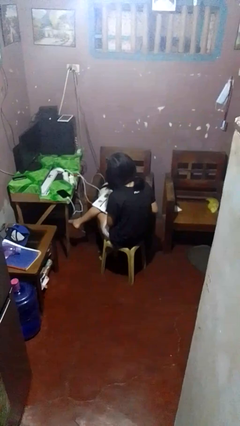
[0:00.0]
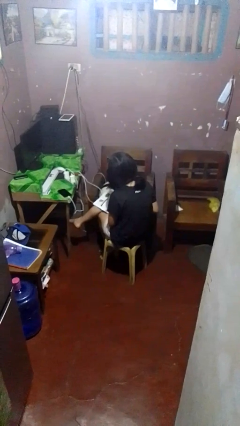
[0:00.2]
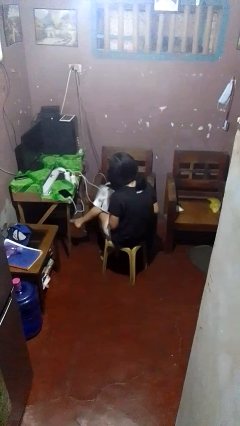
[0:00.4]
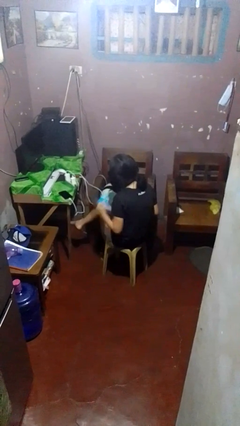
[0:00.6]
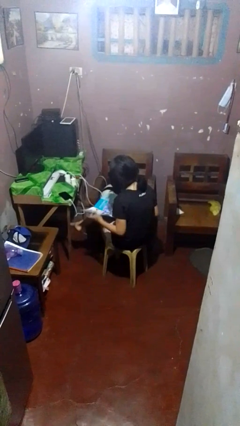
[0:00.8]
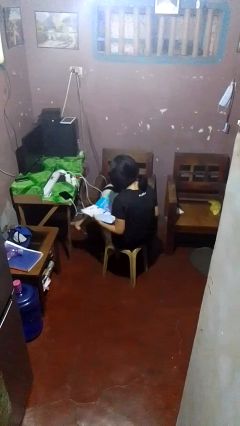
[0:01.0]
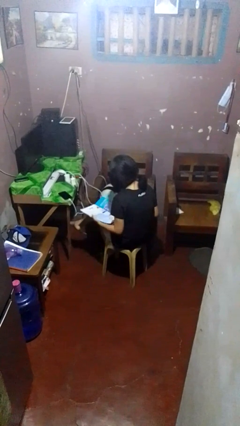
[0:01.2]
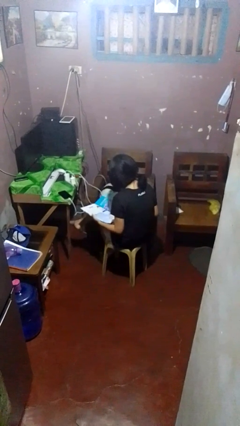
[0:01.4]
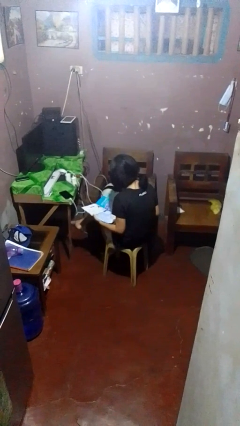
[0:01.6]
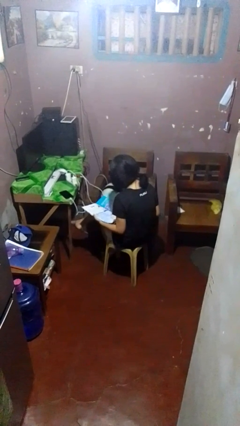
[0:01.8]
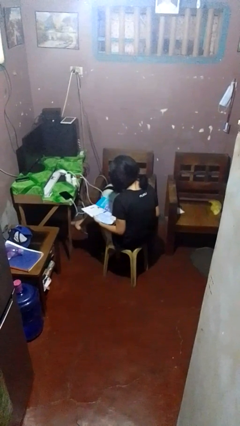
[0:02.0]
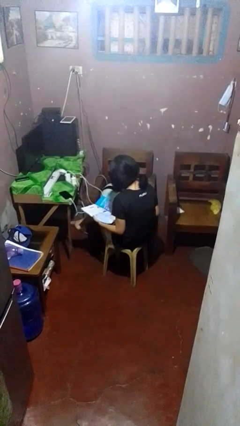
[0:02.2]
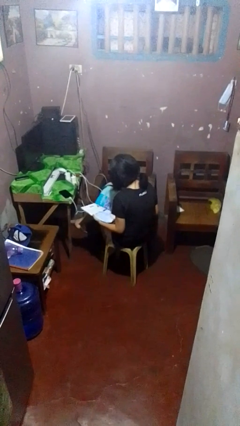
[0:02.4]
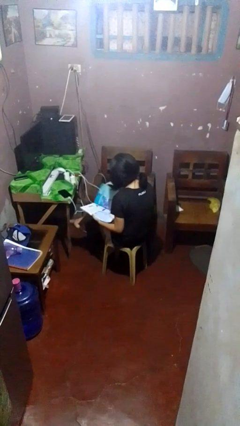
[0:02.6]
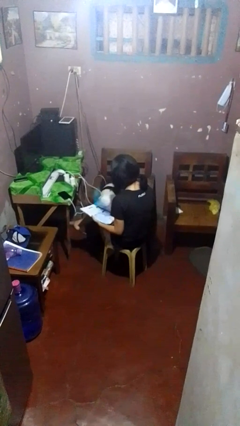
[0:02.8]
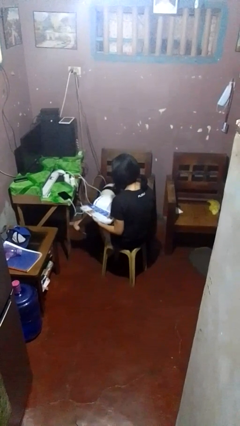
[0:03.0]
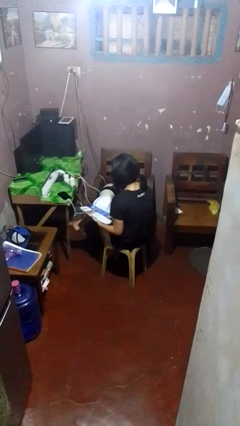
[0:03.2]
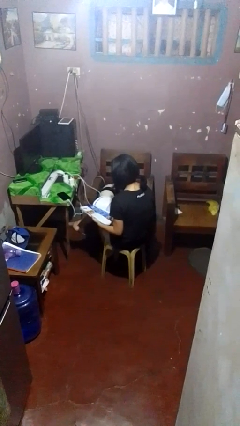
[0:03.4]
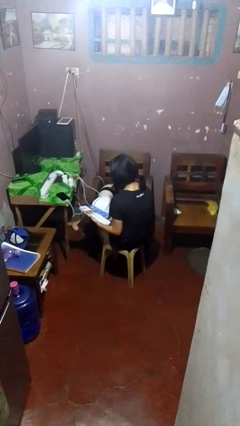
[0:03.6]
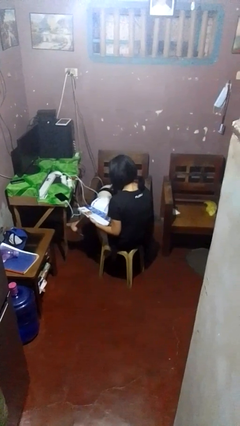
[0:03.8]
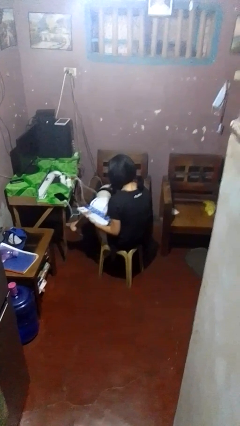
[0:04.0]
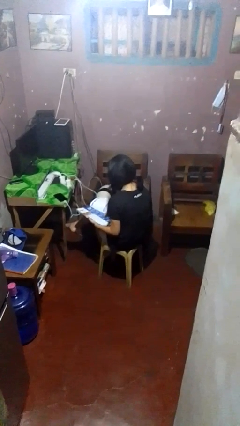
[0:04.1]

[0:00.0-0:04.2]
person reads magazine

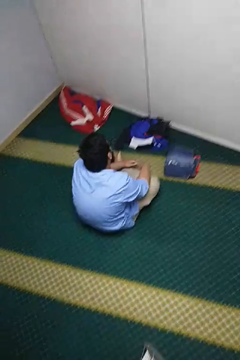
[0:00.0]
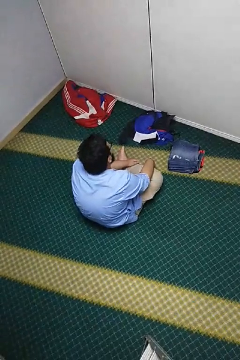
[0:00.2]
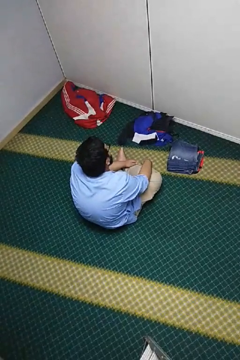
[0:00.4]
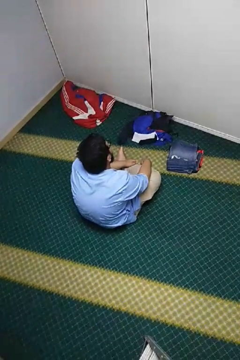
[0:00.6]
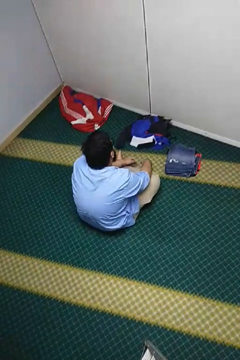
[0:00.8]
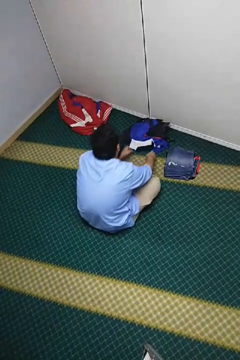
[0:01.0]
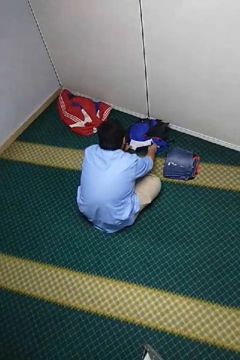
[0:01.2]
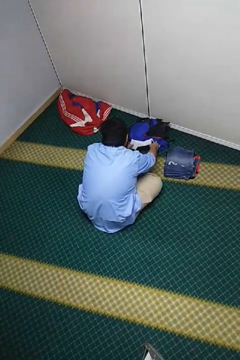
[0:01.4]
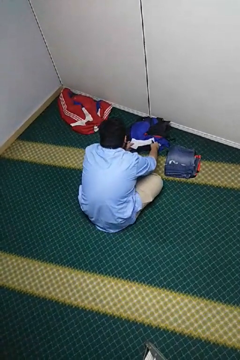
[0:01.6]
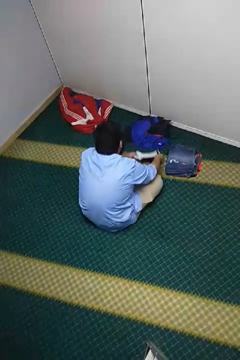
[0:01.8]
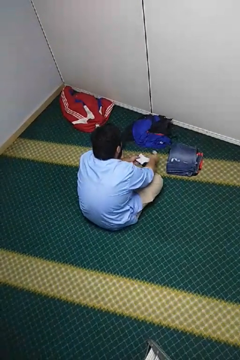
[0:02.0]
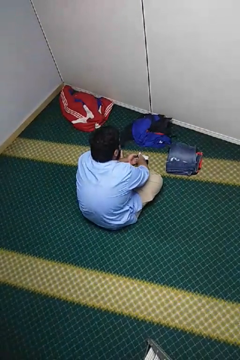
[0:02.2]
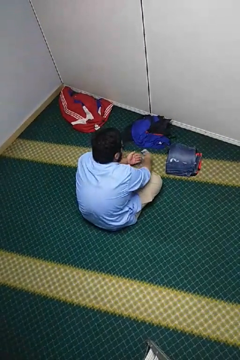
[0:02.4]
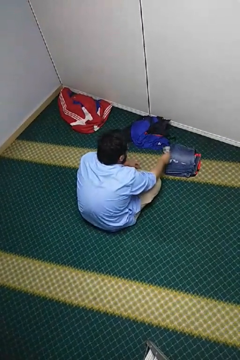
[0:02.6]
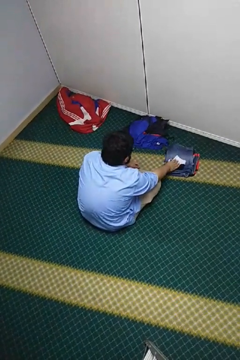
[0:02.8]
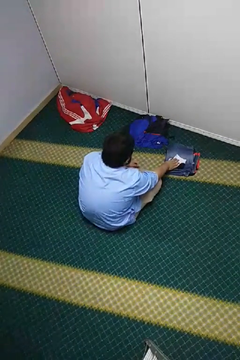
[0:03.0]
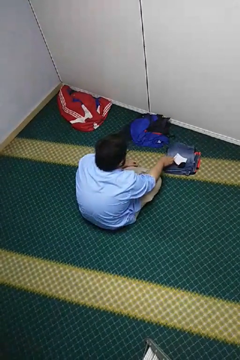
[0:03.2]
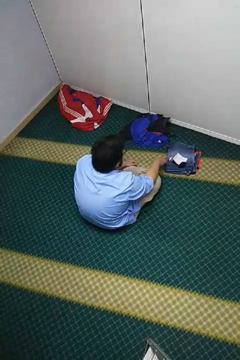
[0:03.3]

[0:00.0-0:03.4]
person folds socks

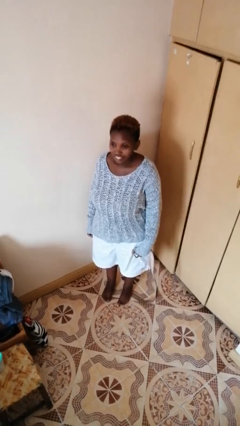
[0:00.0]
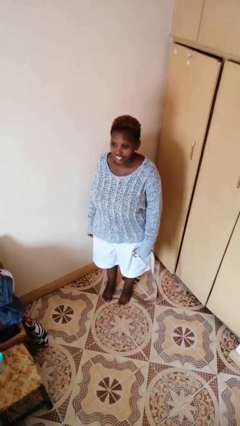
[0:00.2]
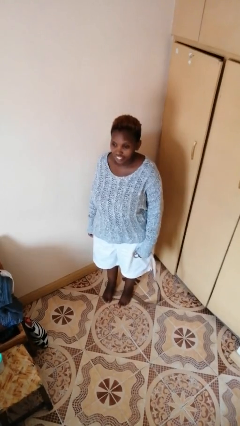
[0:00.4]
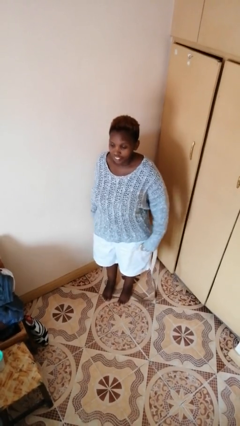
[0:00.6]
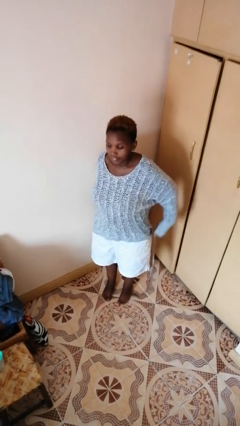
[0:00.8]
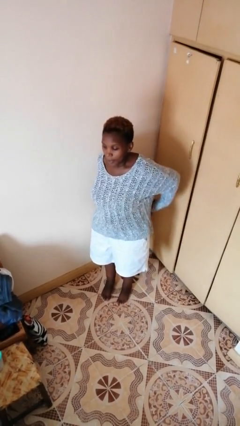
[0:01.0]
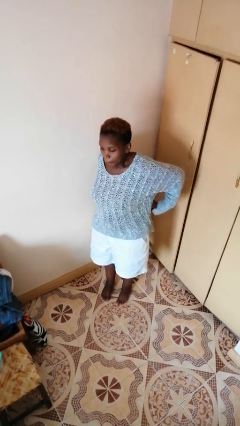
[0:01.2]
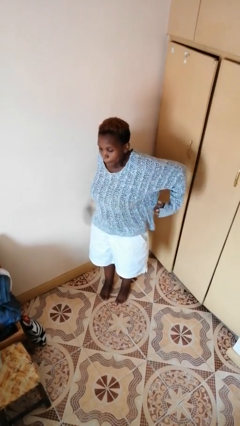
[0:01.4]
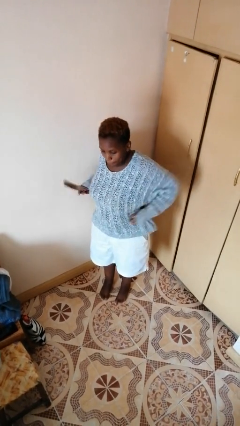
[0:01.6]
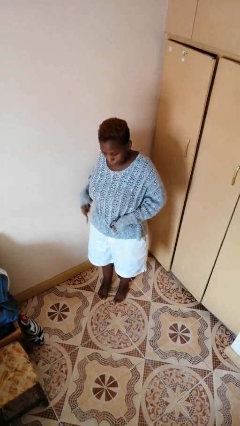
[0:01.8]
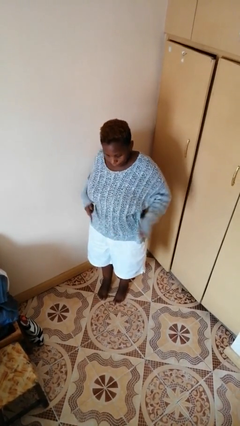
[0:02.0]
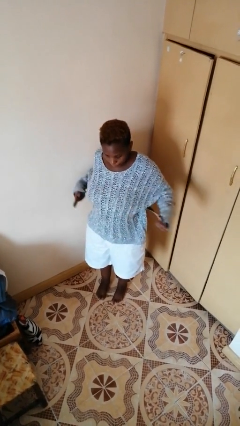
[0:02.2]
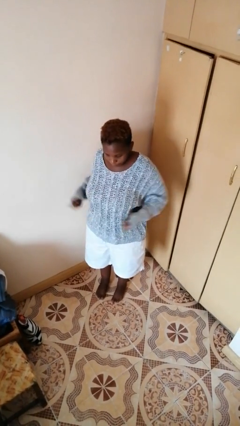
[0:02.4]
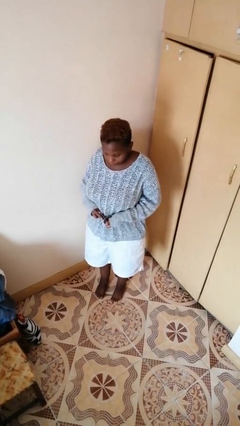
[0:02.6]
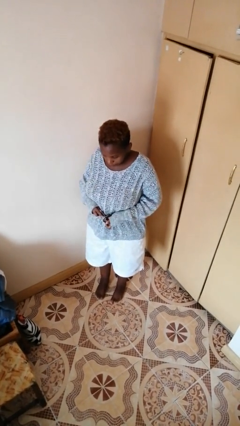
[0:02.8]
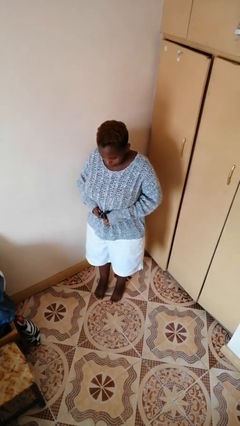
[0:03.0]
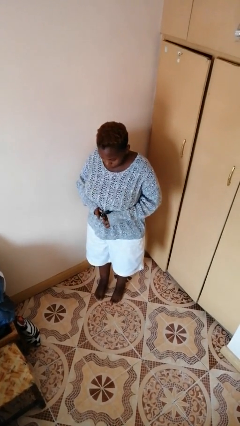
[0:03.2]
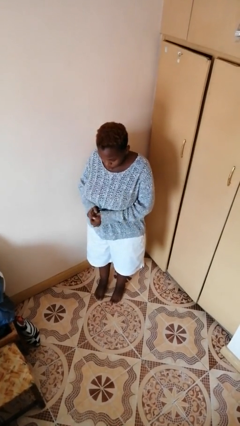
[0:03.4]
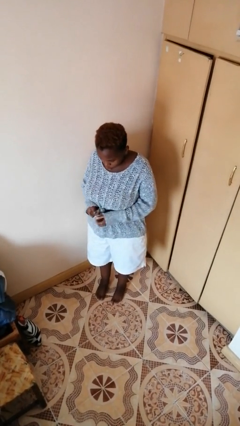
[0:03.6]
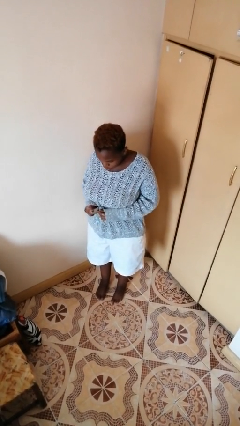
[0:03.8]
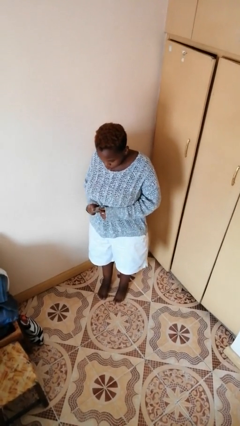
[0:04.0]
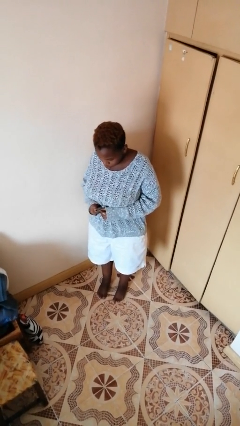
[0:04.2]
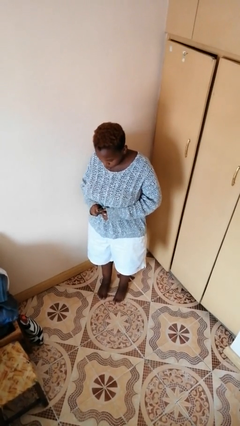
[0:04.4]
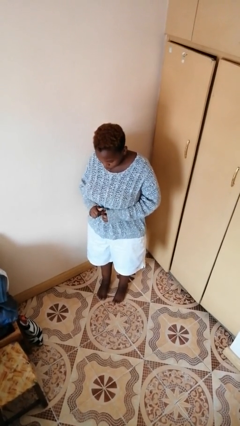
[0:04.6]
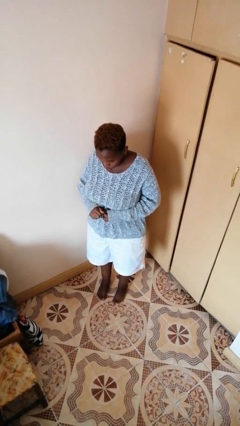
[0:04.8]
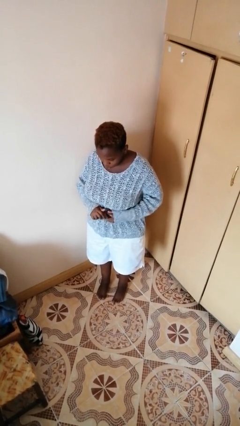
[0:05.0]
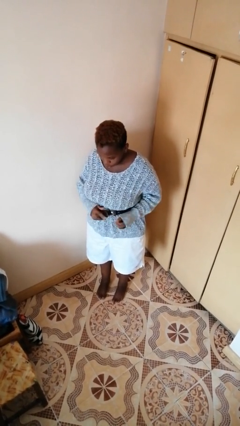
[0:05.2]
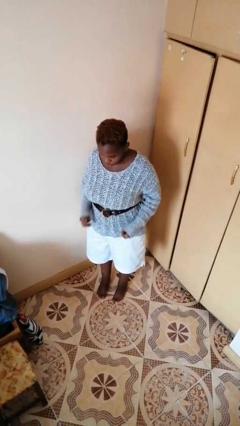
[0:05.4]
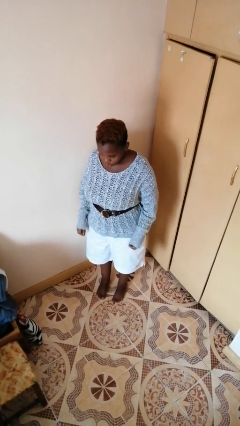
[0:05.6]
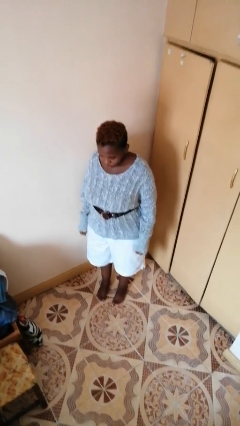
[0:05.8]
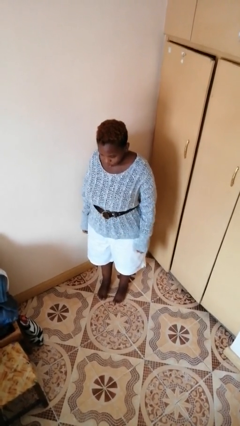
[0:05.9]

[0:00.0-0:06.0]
person puts on belt

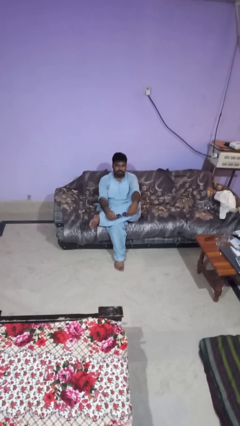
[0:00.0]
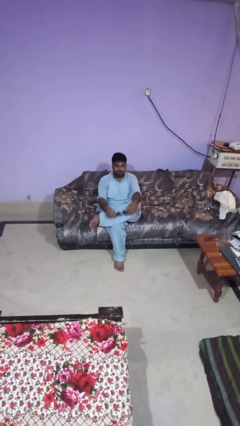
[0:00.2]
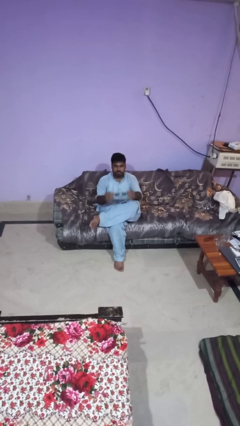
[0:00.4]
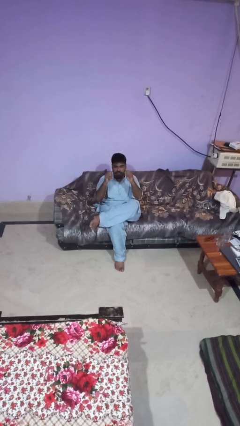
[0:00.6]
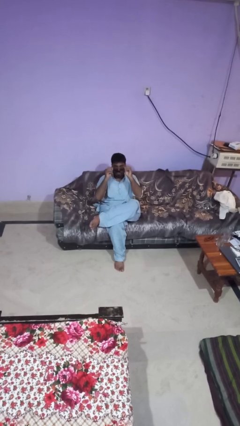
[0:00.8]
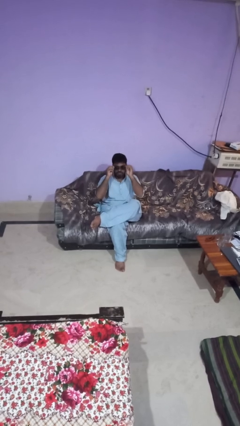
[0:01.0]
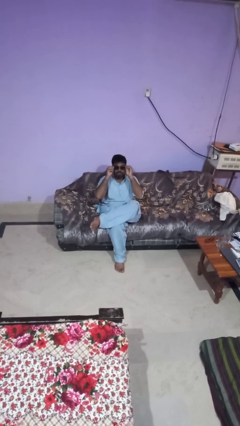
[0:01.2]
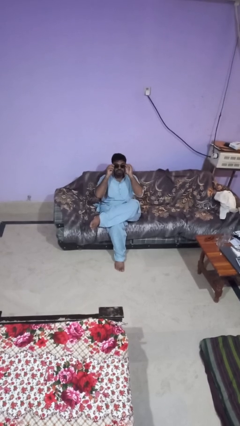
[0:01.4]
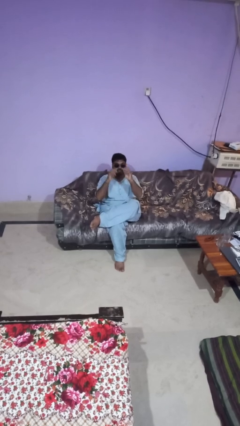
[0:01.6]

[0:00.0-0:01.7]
person puts on sunglasses

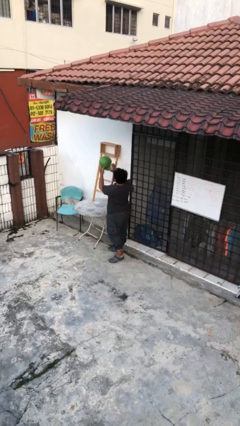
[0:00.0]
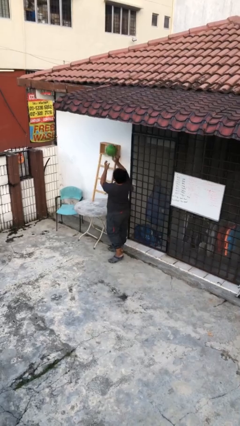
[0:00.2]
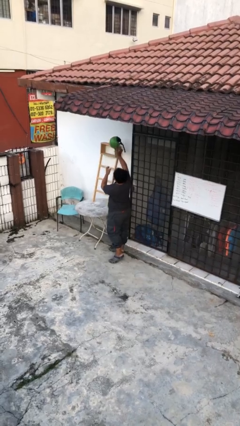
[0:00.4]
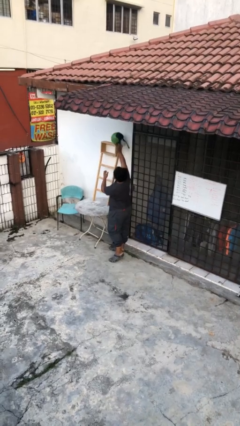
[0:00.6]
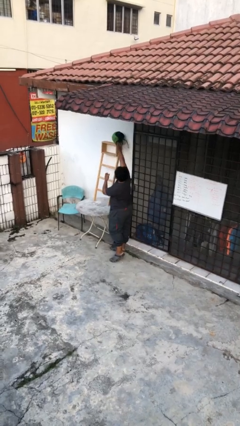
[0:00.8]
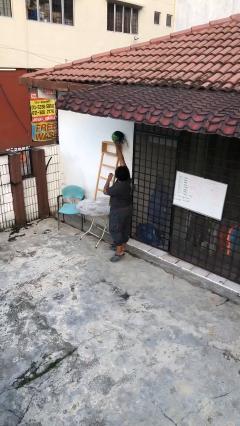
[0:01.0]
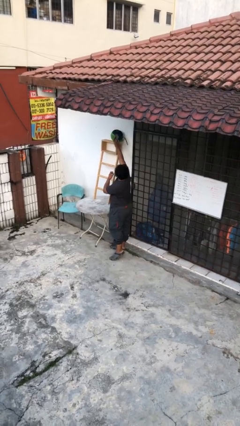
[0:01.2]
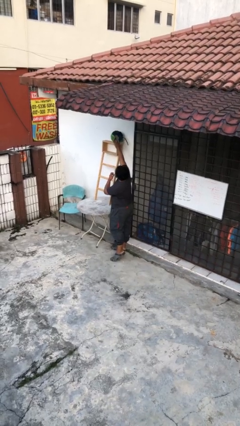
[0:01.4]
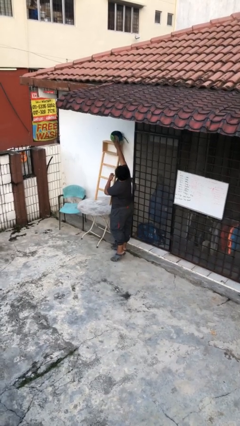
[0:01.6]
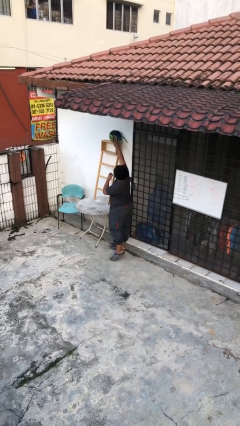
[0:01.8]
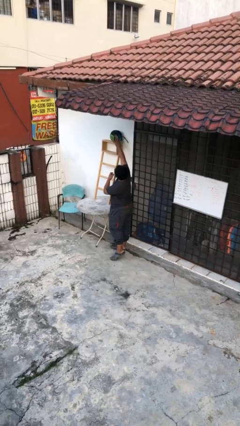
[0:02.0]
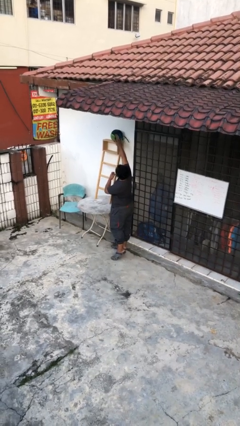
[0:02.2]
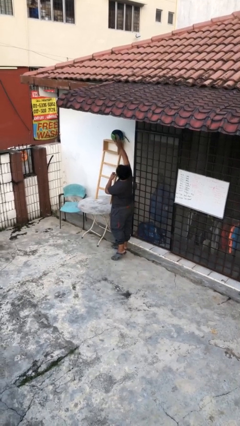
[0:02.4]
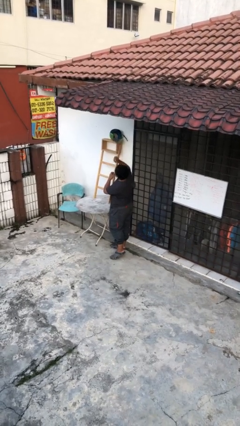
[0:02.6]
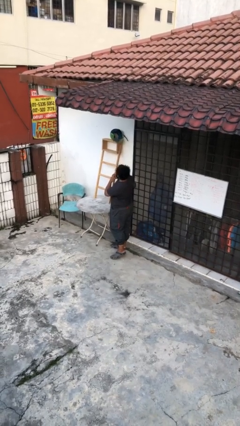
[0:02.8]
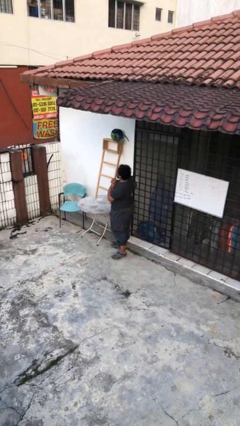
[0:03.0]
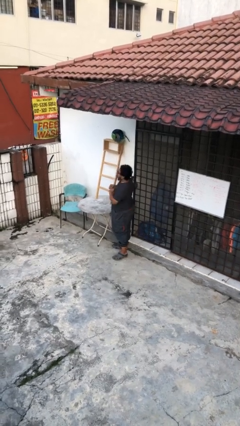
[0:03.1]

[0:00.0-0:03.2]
person puts down object on shelf
